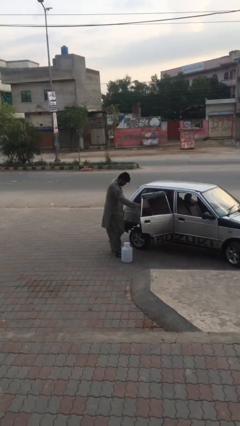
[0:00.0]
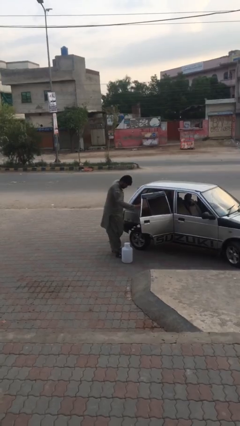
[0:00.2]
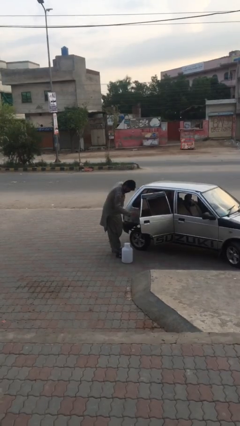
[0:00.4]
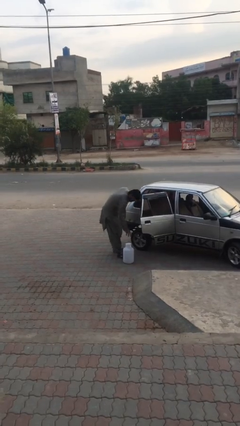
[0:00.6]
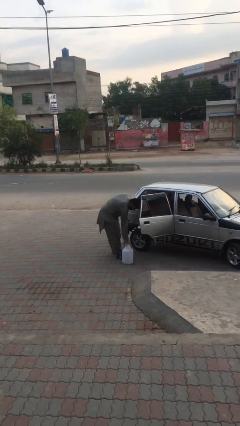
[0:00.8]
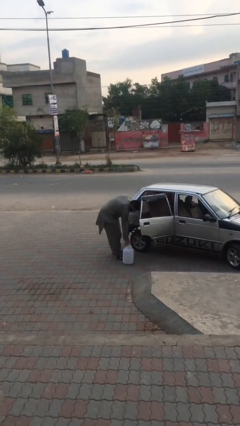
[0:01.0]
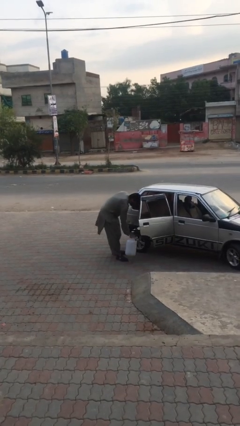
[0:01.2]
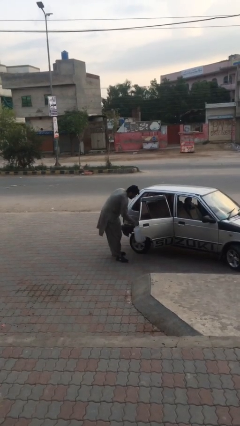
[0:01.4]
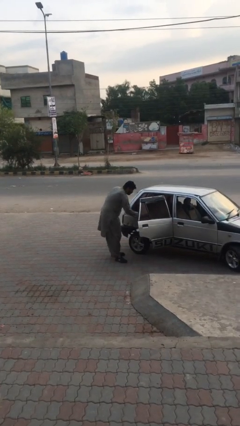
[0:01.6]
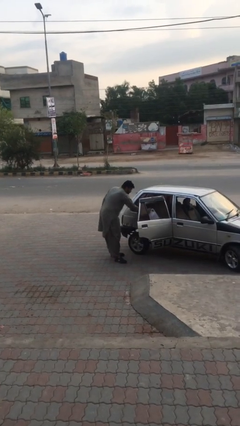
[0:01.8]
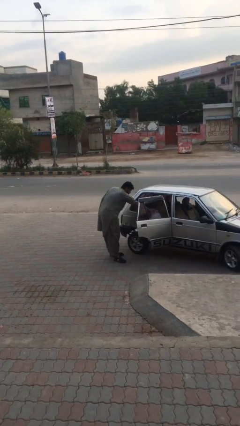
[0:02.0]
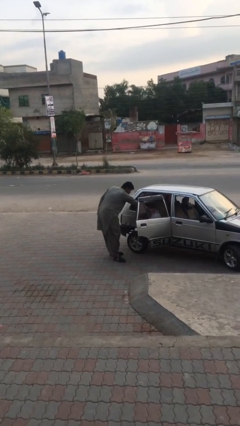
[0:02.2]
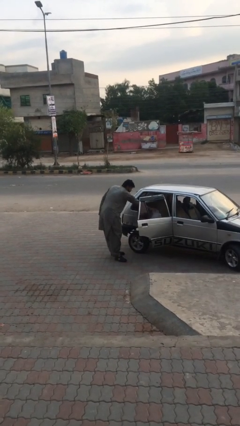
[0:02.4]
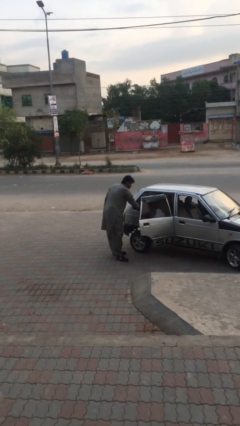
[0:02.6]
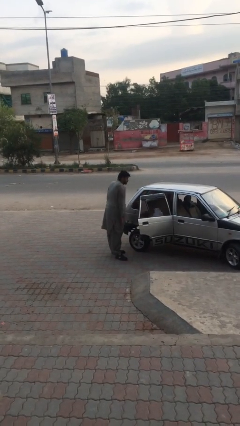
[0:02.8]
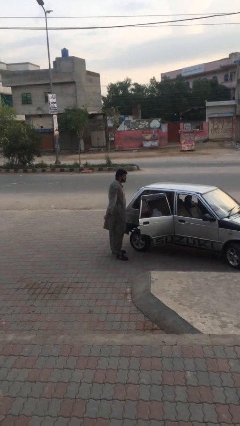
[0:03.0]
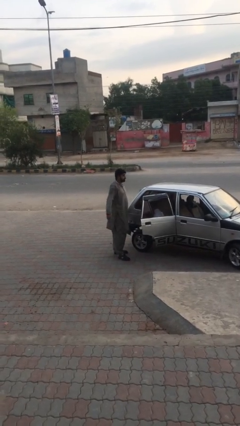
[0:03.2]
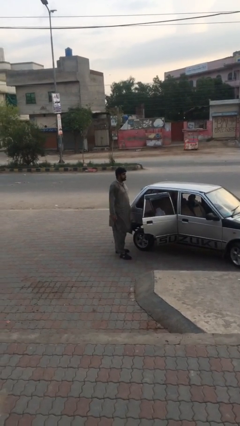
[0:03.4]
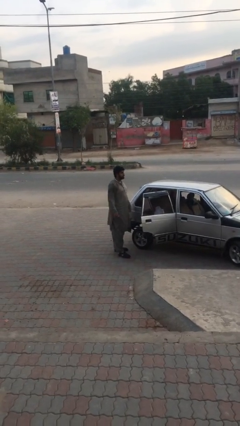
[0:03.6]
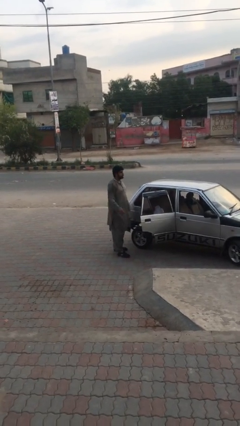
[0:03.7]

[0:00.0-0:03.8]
person loads car

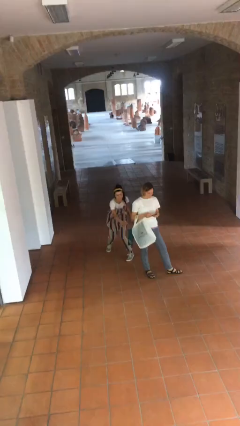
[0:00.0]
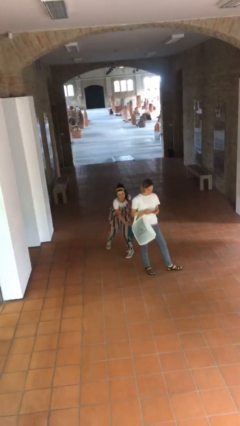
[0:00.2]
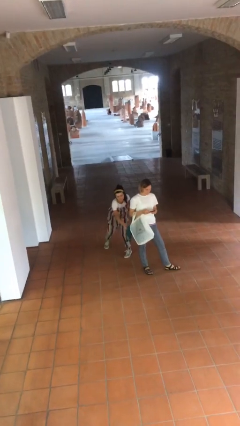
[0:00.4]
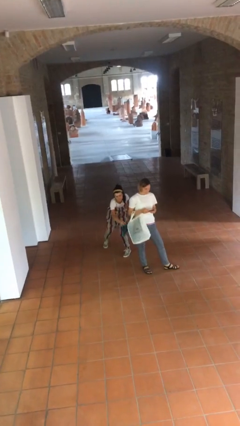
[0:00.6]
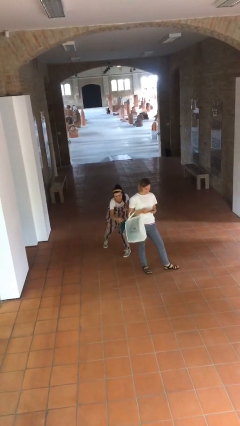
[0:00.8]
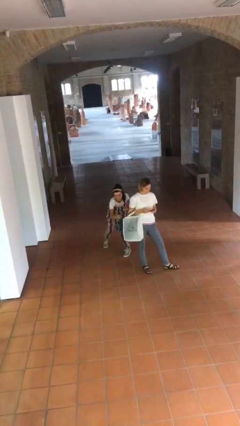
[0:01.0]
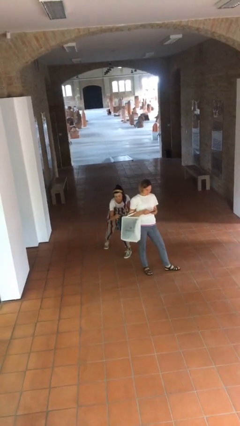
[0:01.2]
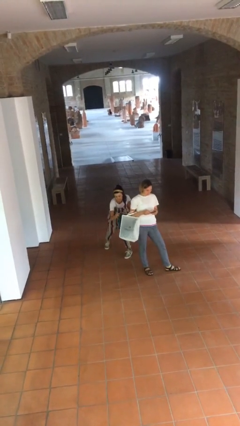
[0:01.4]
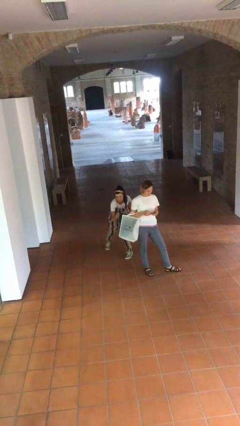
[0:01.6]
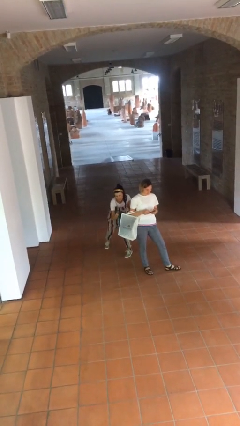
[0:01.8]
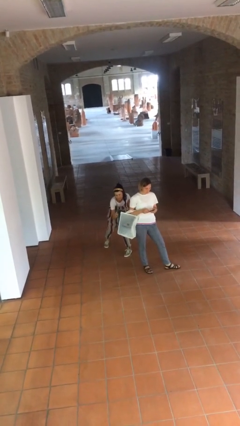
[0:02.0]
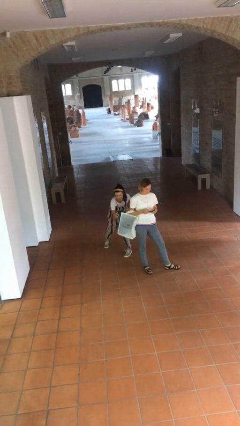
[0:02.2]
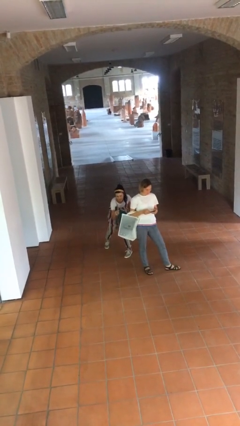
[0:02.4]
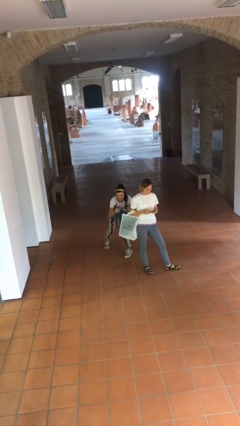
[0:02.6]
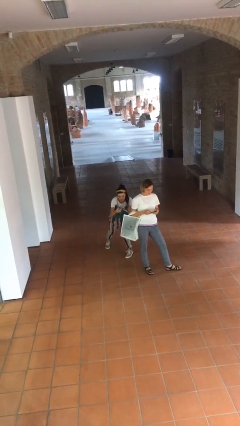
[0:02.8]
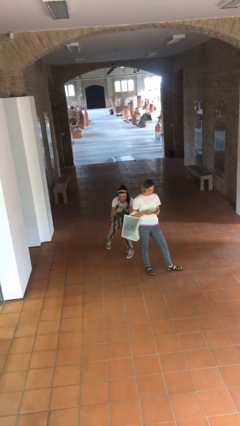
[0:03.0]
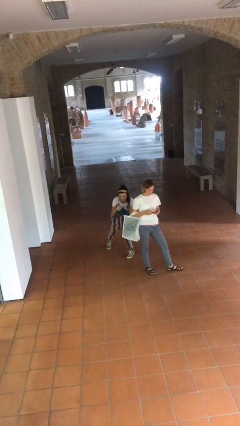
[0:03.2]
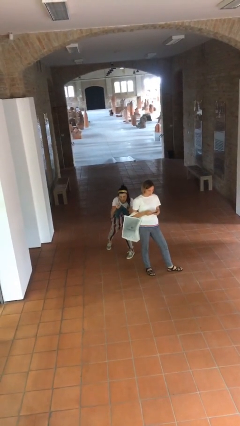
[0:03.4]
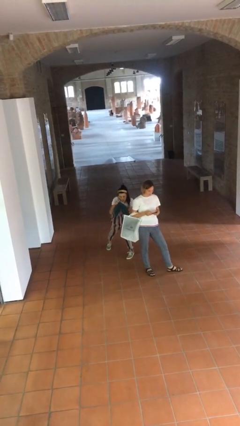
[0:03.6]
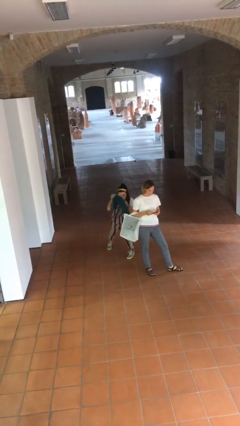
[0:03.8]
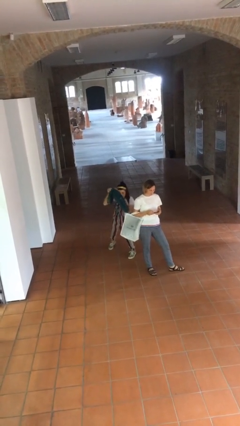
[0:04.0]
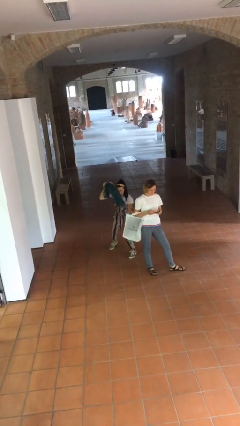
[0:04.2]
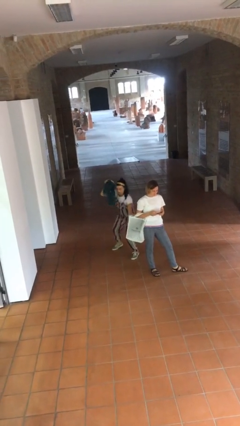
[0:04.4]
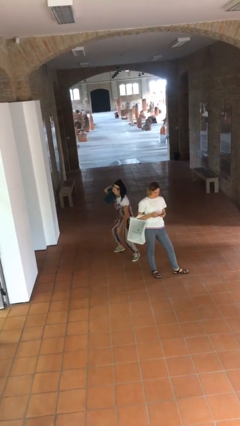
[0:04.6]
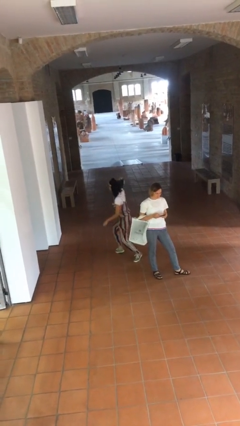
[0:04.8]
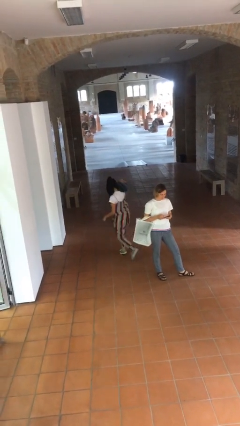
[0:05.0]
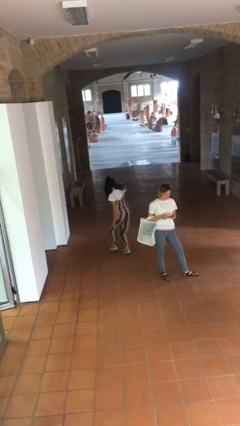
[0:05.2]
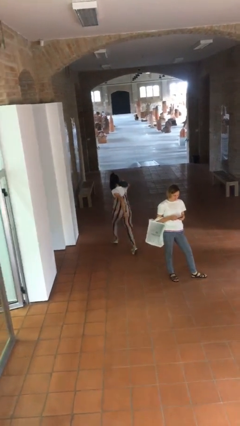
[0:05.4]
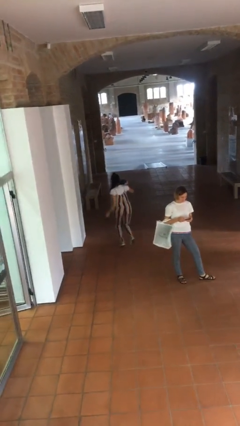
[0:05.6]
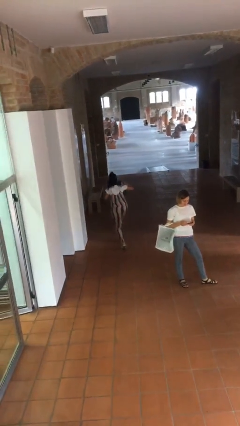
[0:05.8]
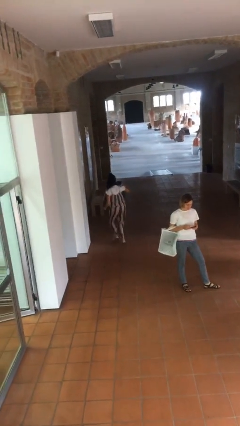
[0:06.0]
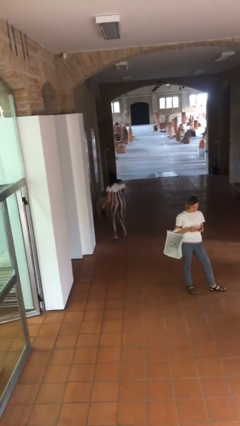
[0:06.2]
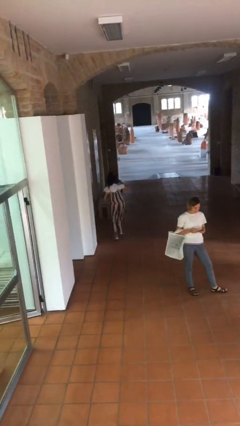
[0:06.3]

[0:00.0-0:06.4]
person steals object from person

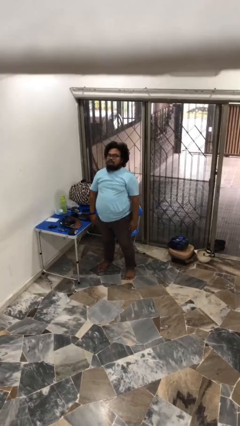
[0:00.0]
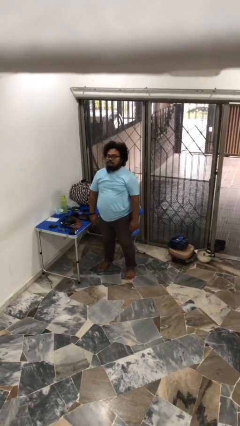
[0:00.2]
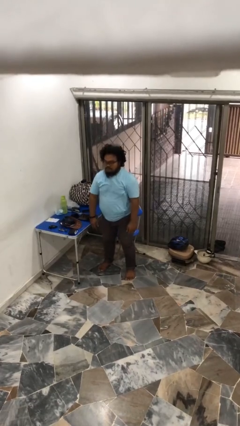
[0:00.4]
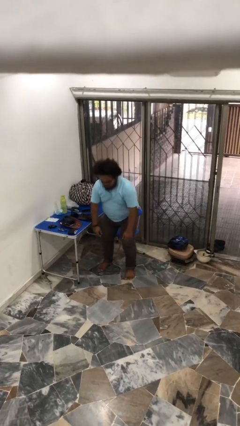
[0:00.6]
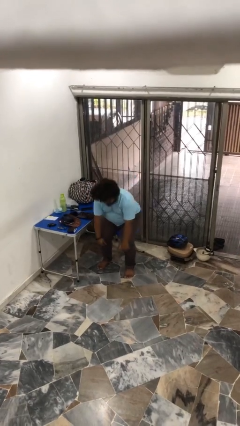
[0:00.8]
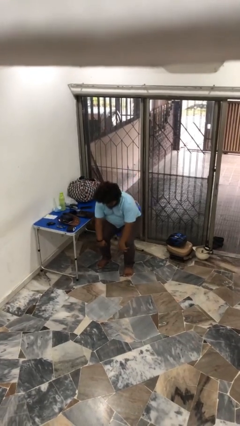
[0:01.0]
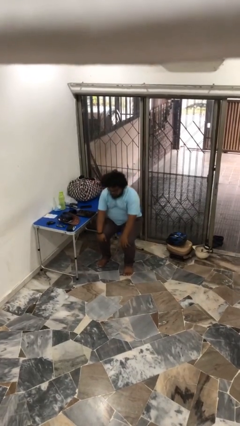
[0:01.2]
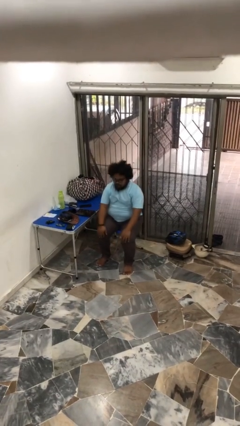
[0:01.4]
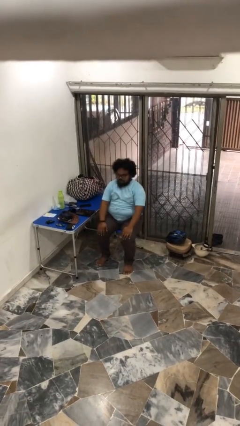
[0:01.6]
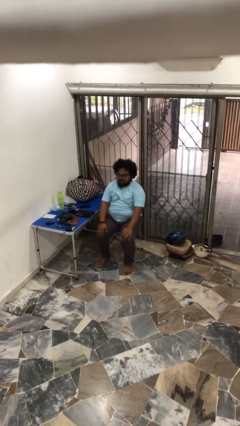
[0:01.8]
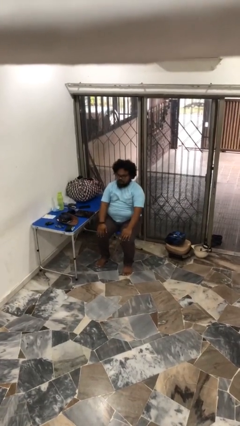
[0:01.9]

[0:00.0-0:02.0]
person sits down

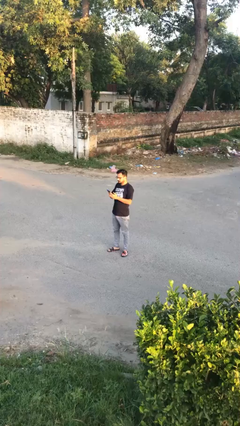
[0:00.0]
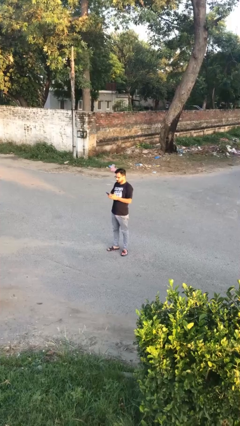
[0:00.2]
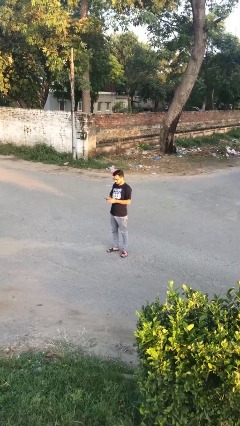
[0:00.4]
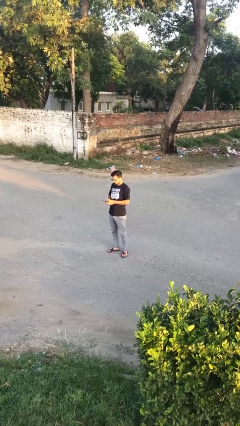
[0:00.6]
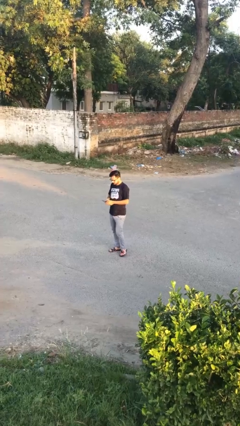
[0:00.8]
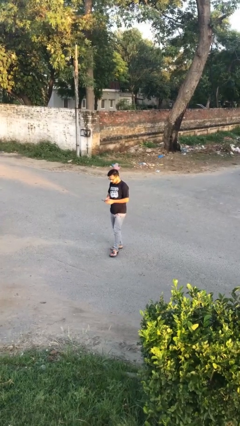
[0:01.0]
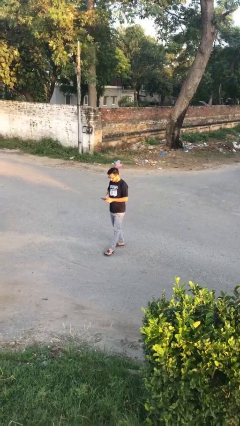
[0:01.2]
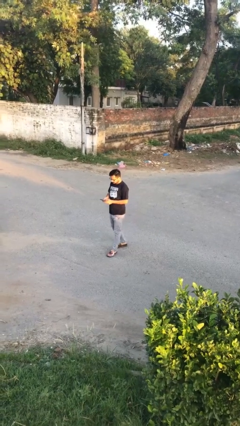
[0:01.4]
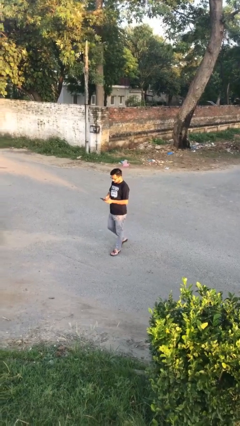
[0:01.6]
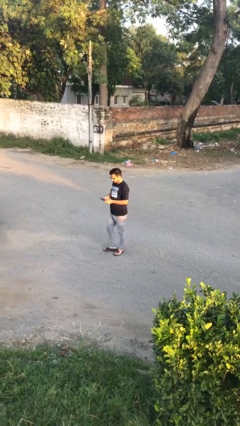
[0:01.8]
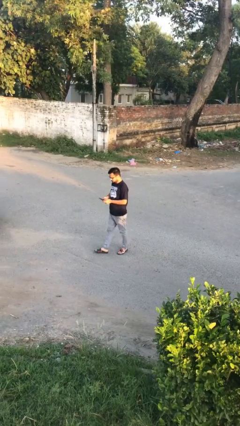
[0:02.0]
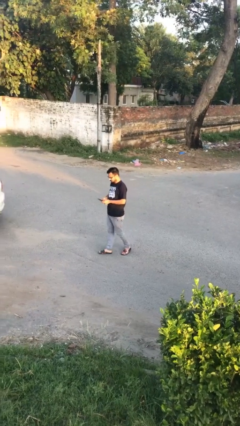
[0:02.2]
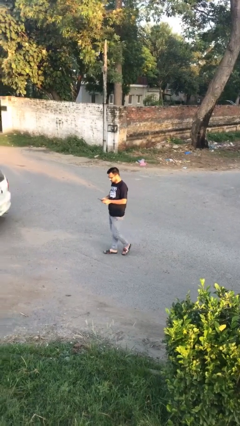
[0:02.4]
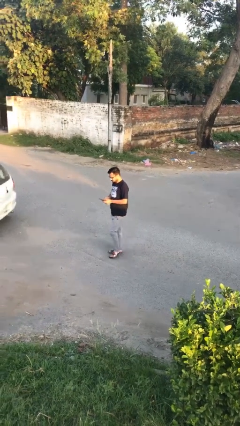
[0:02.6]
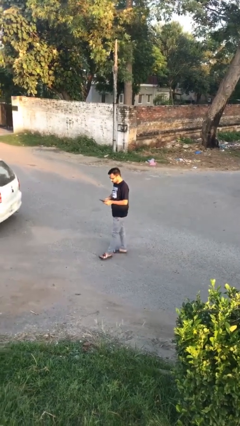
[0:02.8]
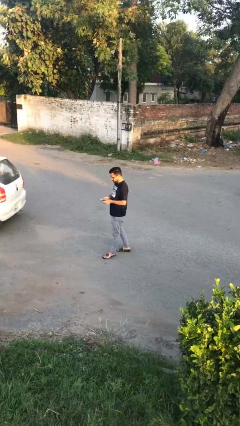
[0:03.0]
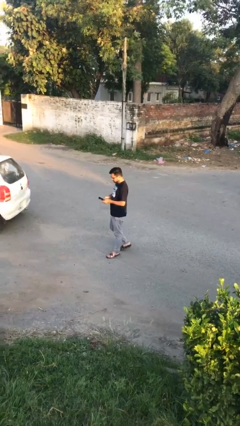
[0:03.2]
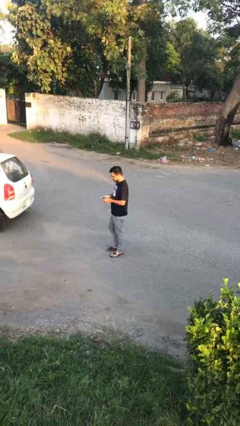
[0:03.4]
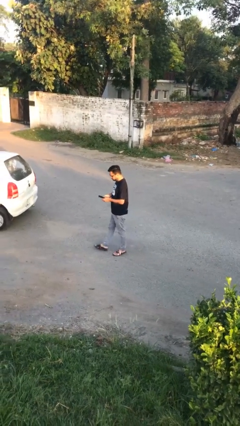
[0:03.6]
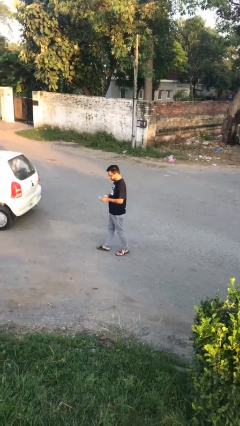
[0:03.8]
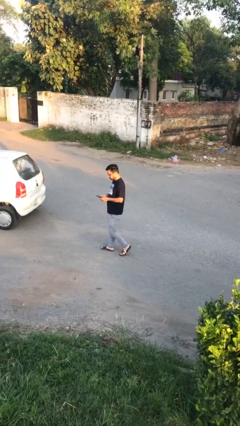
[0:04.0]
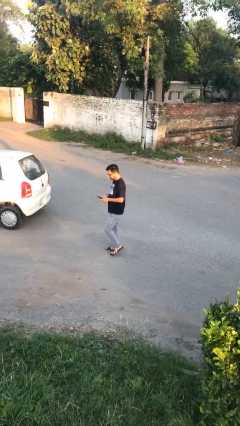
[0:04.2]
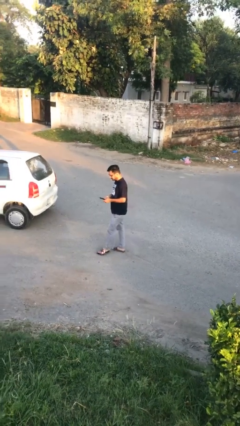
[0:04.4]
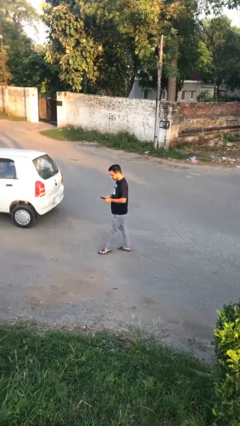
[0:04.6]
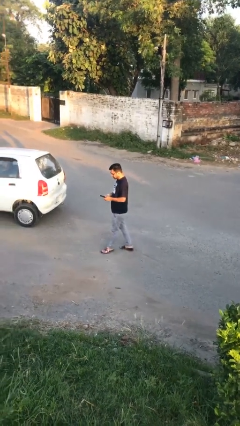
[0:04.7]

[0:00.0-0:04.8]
person texts on phone

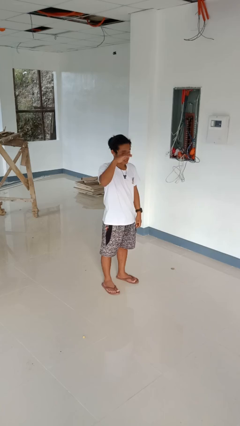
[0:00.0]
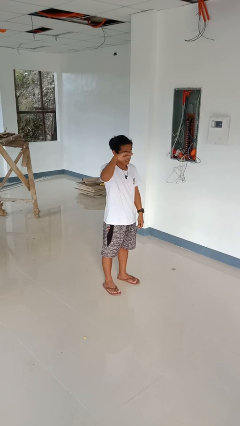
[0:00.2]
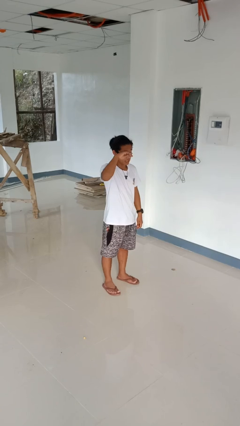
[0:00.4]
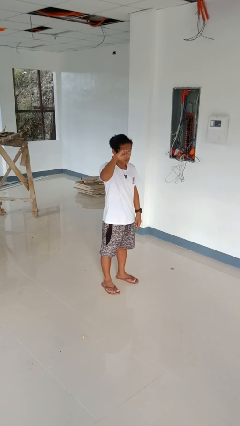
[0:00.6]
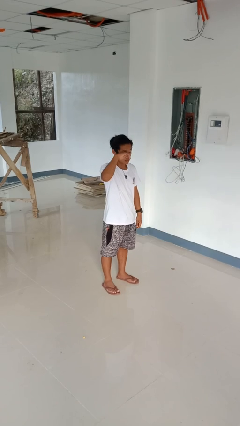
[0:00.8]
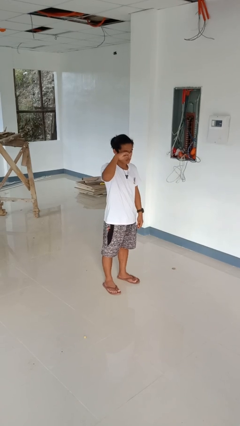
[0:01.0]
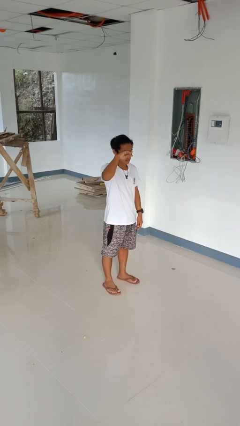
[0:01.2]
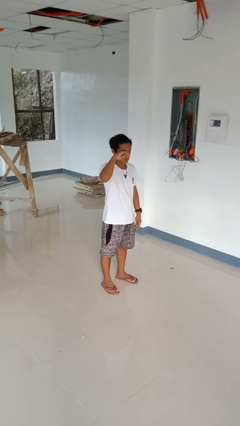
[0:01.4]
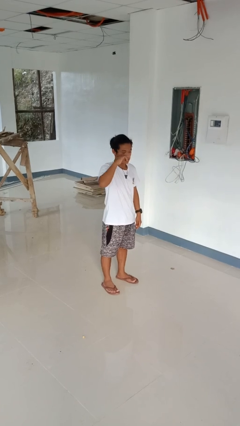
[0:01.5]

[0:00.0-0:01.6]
person rubs eyes
